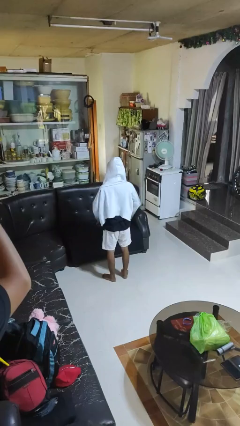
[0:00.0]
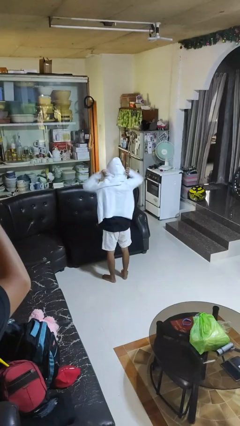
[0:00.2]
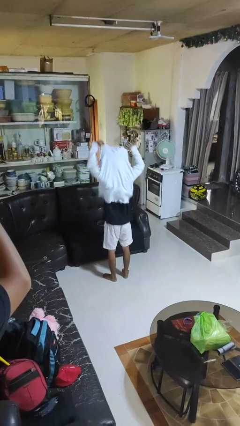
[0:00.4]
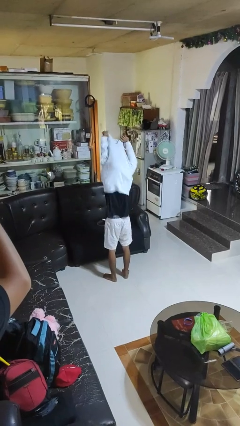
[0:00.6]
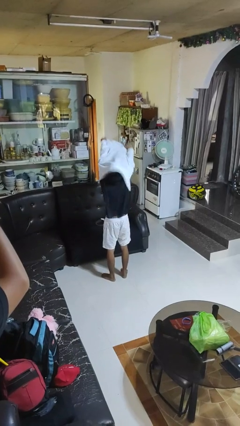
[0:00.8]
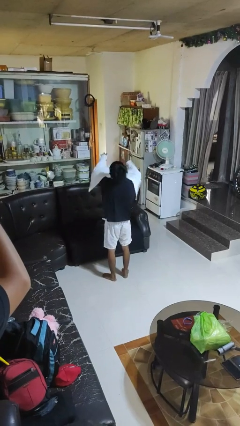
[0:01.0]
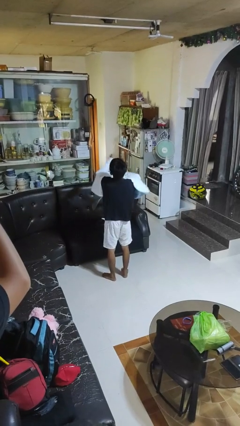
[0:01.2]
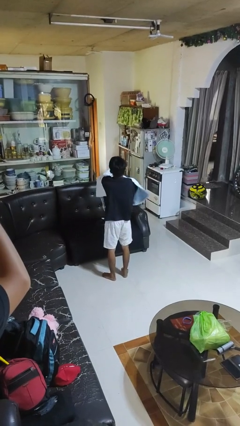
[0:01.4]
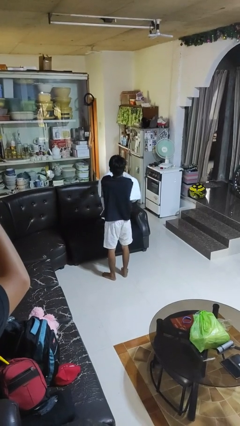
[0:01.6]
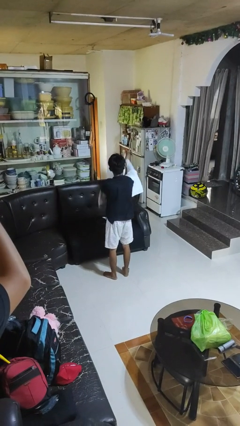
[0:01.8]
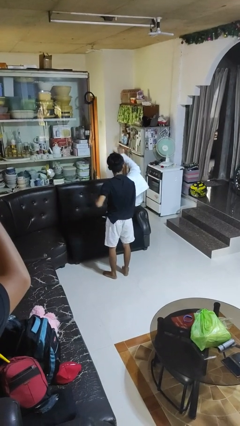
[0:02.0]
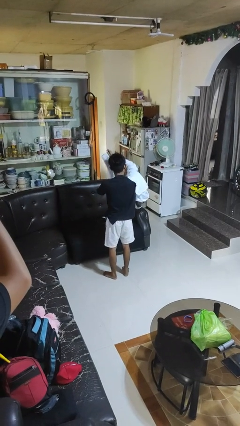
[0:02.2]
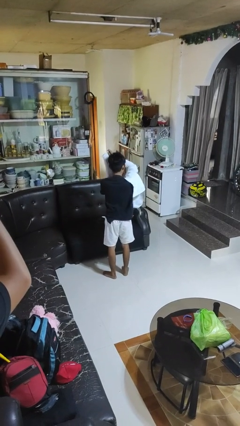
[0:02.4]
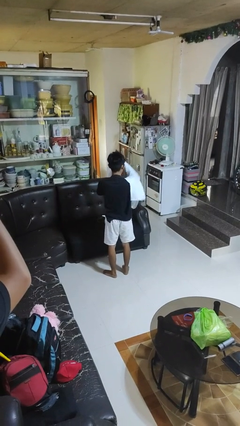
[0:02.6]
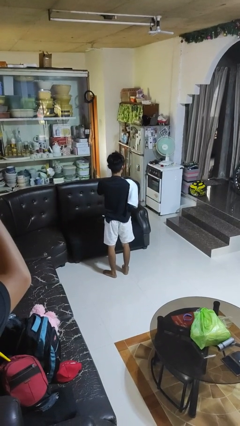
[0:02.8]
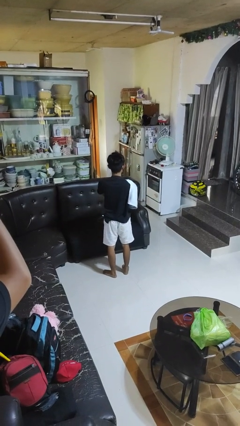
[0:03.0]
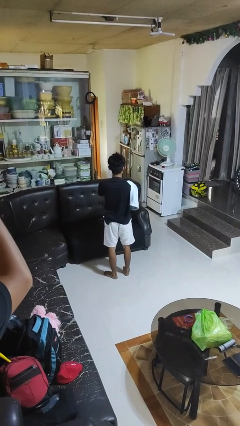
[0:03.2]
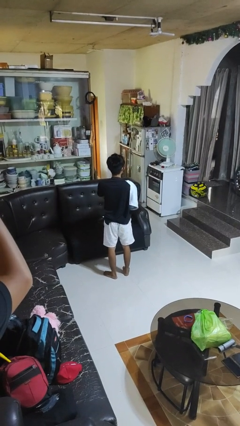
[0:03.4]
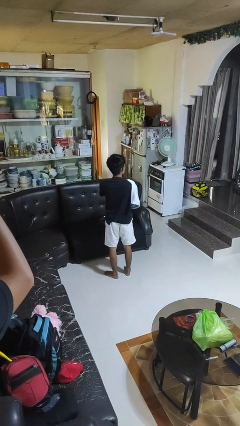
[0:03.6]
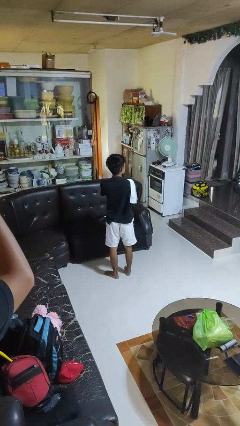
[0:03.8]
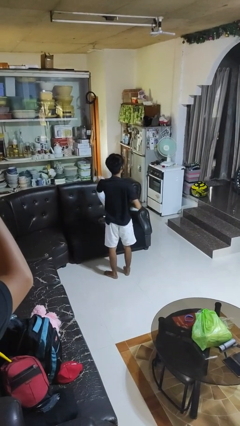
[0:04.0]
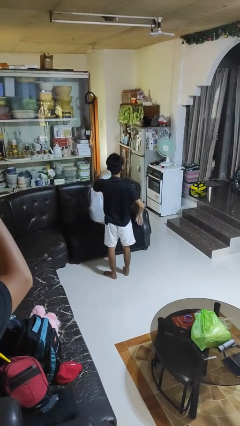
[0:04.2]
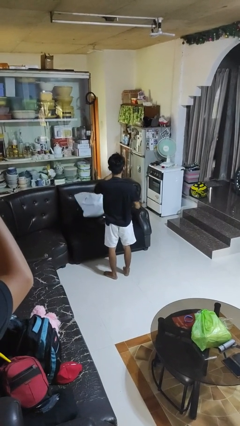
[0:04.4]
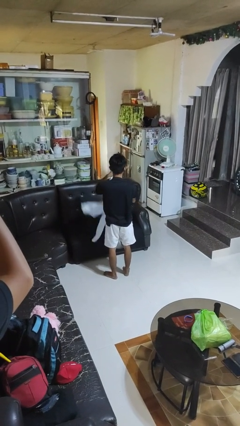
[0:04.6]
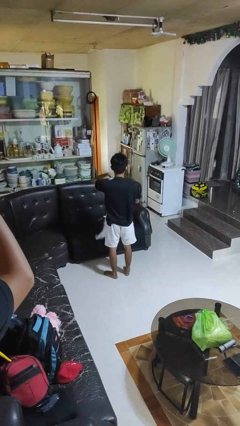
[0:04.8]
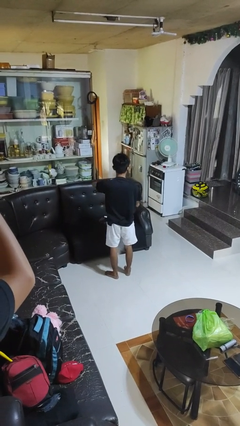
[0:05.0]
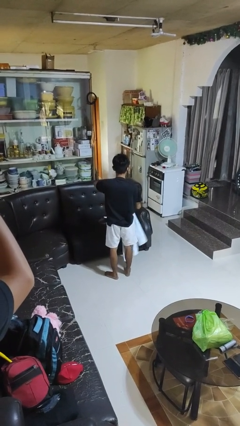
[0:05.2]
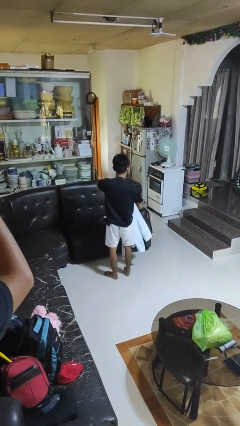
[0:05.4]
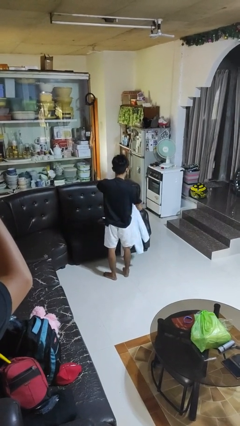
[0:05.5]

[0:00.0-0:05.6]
person takes off hoodie

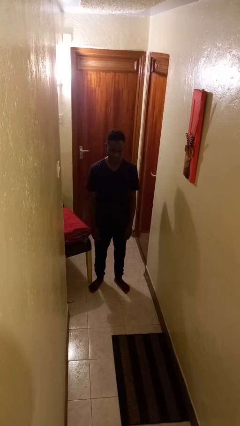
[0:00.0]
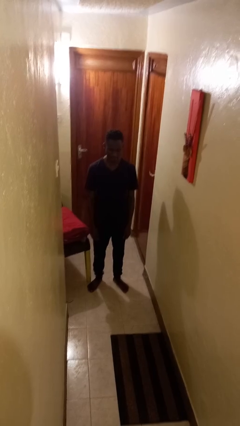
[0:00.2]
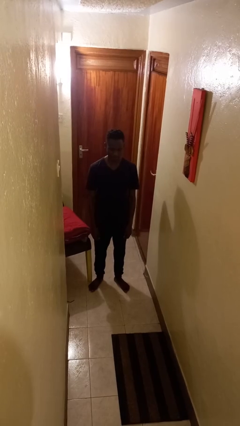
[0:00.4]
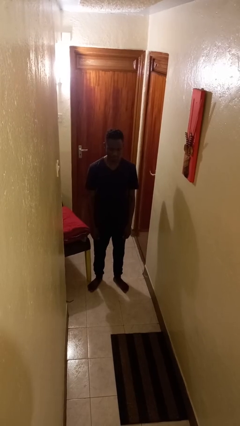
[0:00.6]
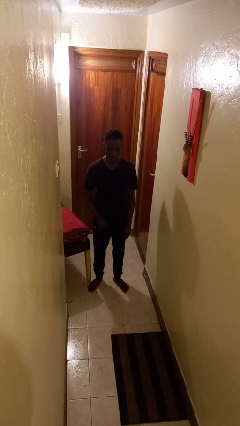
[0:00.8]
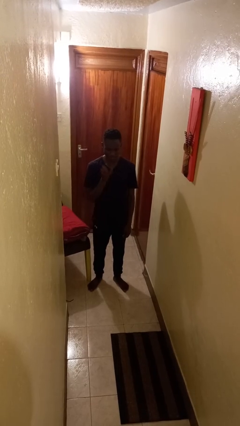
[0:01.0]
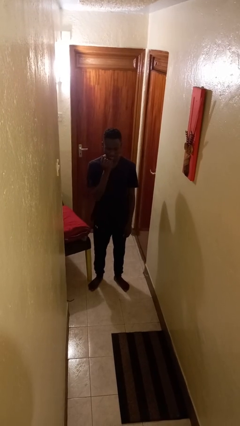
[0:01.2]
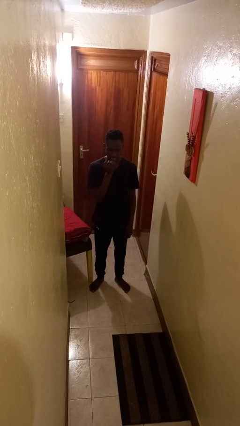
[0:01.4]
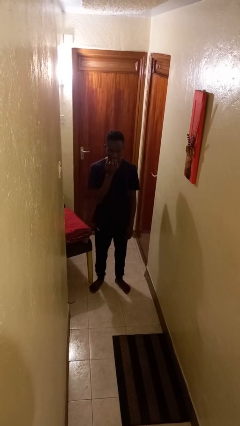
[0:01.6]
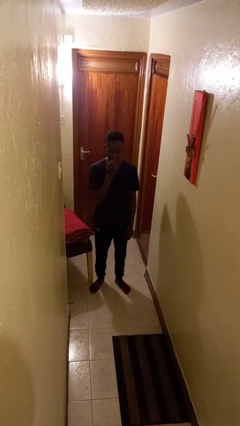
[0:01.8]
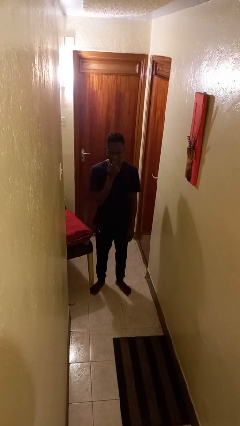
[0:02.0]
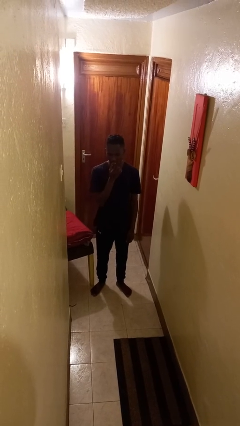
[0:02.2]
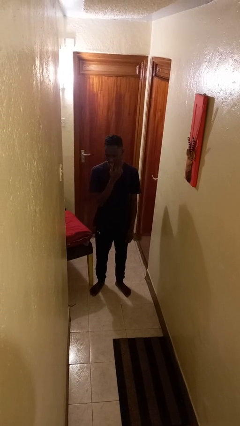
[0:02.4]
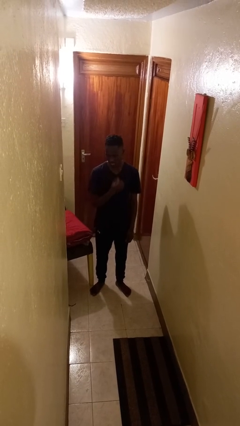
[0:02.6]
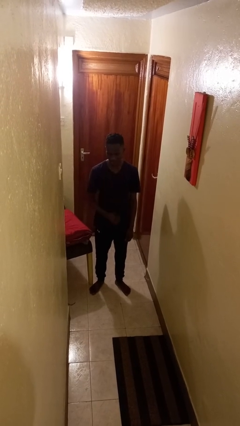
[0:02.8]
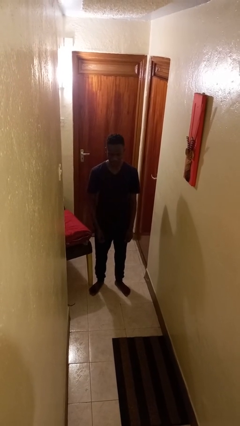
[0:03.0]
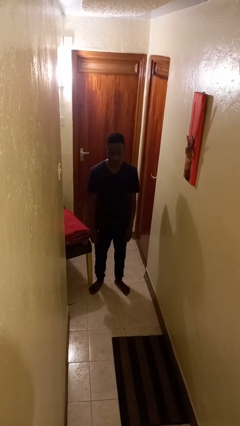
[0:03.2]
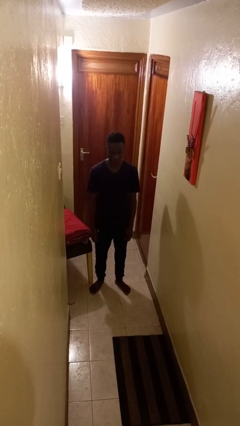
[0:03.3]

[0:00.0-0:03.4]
person licks fingers

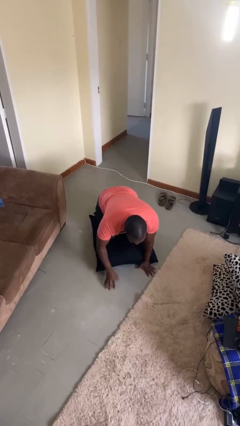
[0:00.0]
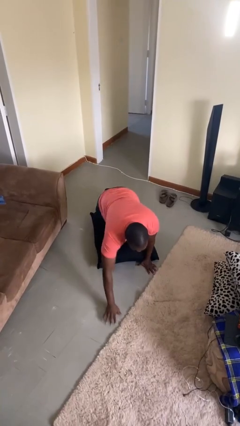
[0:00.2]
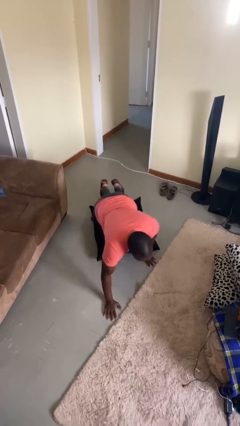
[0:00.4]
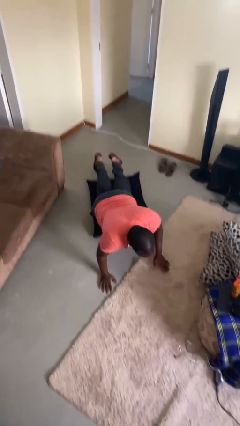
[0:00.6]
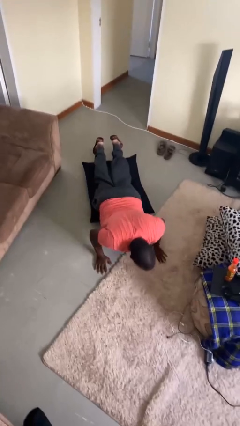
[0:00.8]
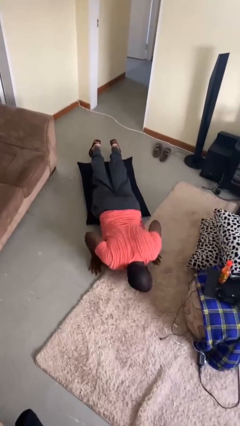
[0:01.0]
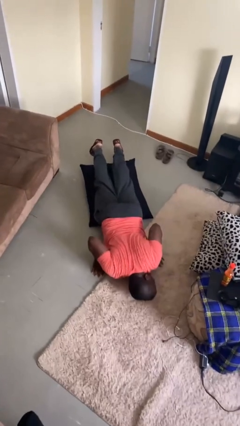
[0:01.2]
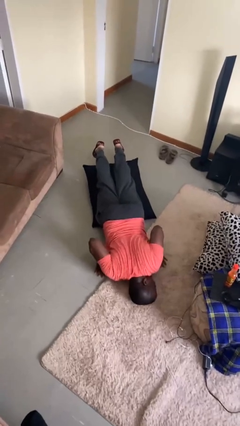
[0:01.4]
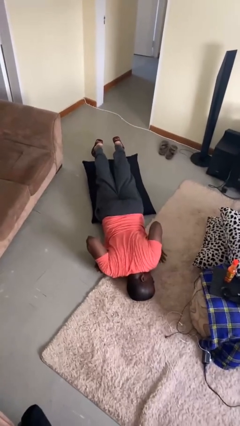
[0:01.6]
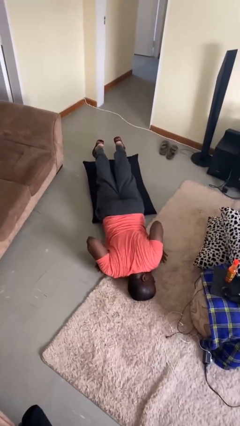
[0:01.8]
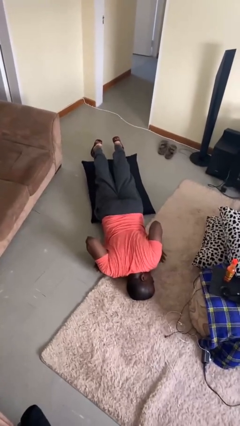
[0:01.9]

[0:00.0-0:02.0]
person lies down on floor

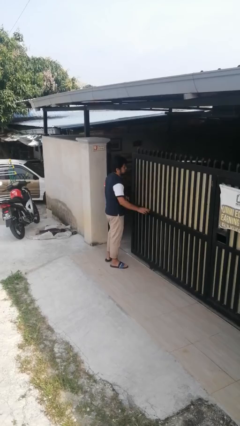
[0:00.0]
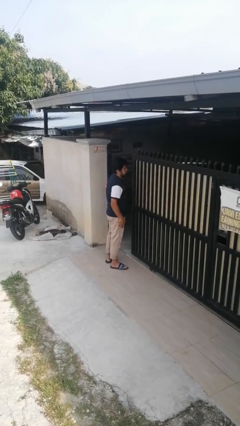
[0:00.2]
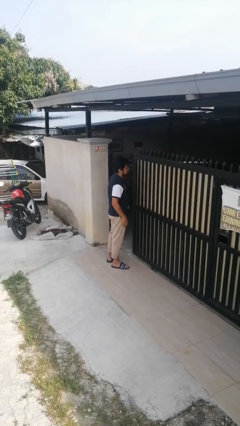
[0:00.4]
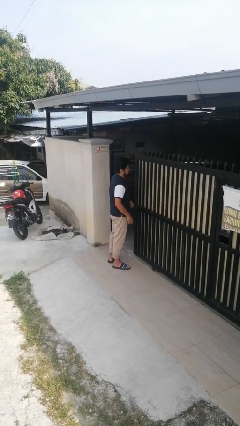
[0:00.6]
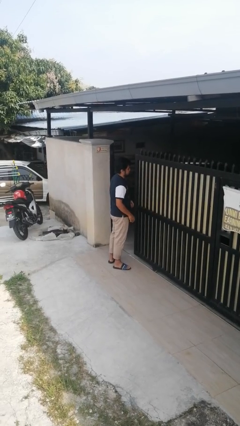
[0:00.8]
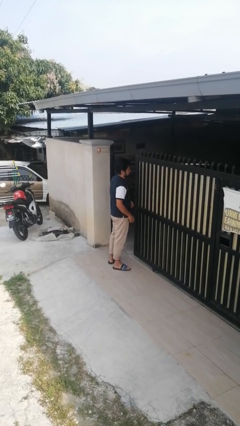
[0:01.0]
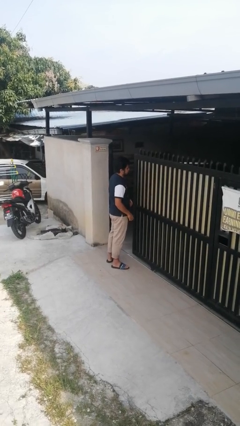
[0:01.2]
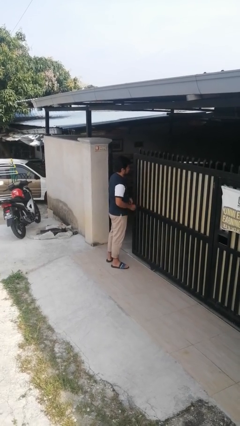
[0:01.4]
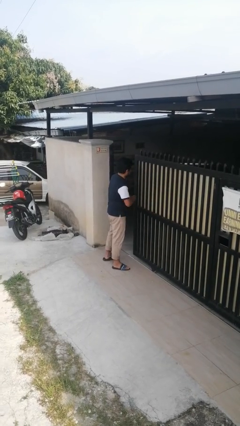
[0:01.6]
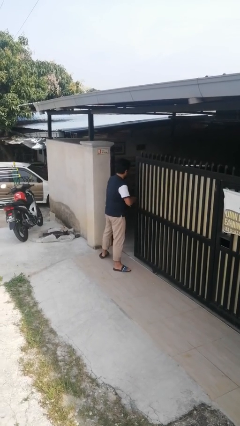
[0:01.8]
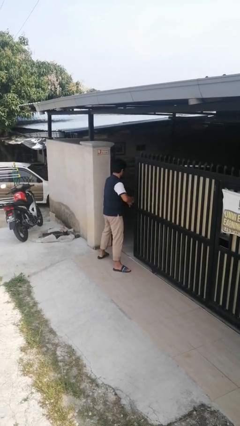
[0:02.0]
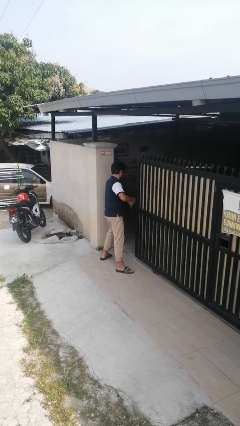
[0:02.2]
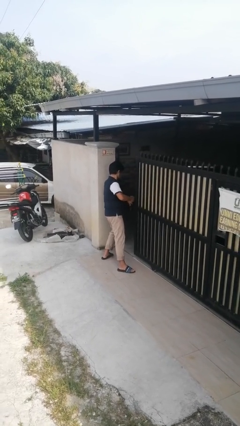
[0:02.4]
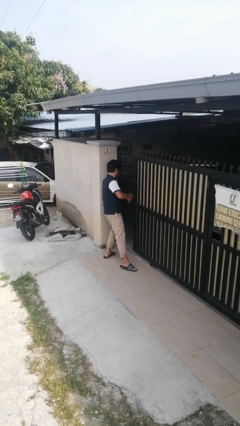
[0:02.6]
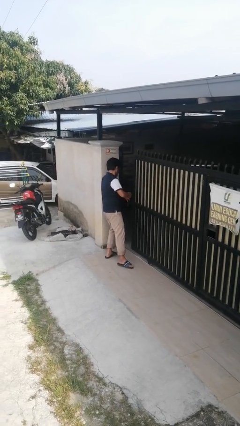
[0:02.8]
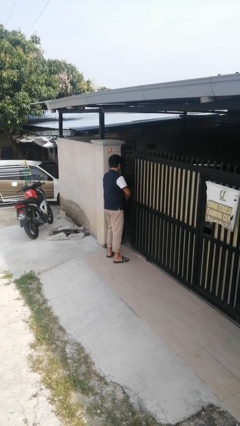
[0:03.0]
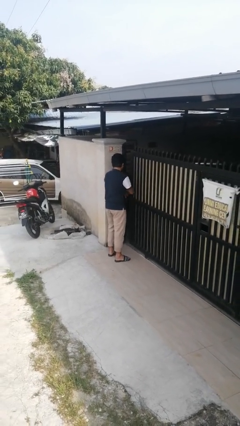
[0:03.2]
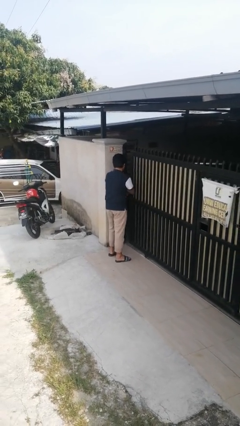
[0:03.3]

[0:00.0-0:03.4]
person closes sliding door

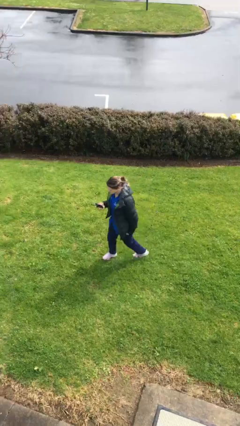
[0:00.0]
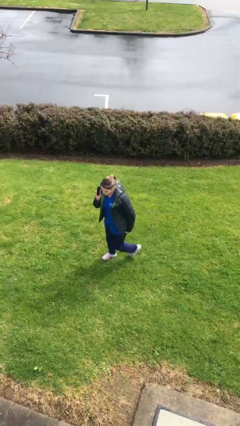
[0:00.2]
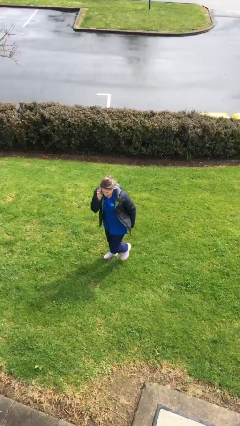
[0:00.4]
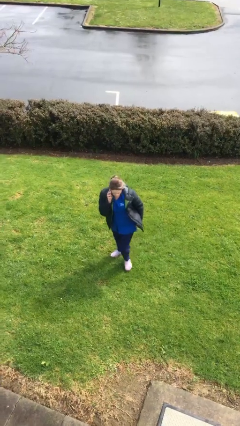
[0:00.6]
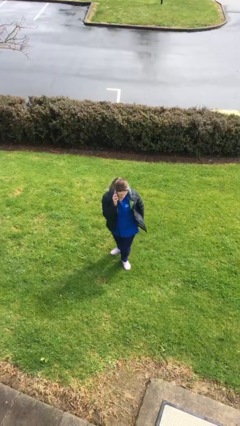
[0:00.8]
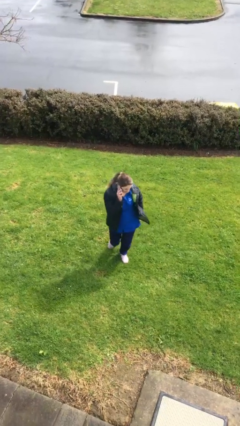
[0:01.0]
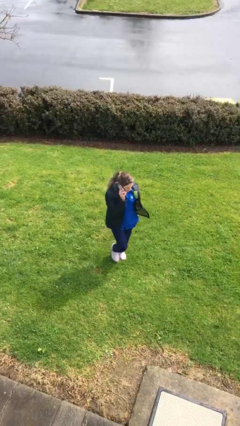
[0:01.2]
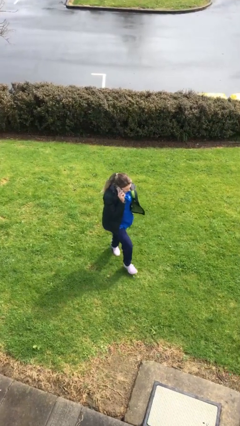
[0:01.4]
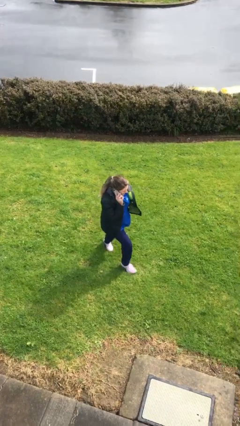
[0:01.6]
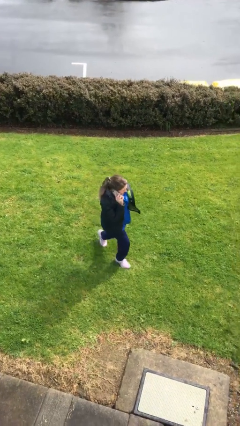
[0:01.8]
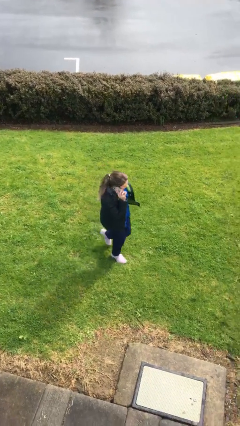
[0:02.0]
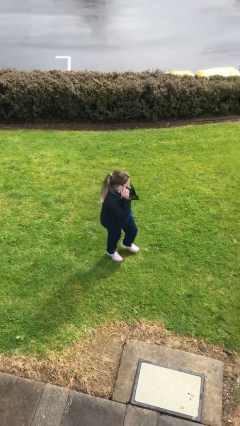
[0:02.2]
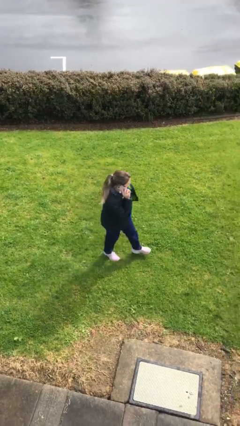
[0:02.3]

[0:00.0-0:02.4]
person talks on phone

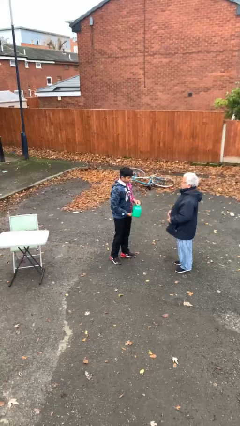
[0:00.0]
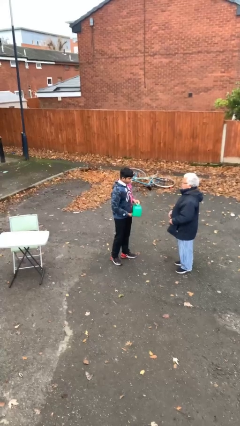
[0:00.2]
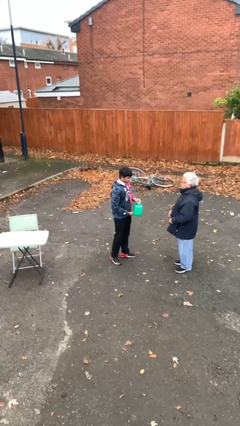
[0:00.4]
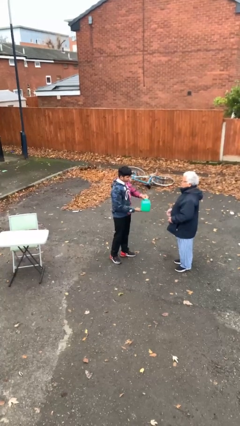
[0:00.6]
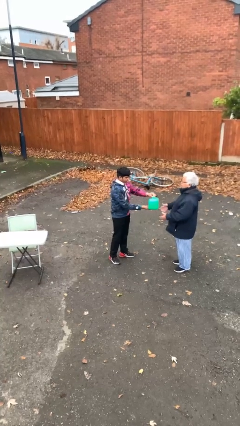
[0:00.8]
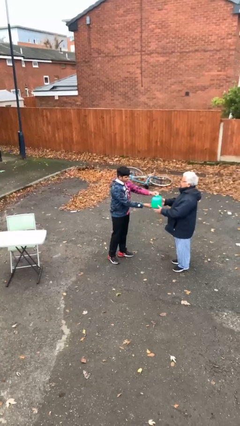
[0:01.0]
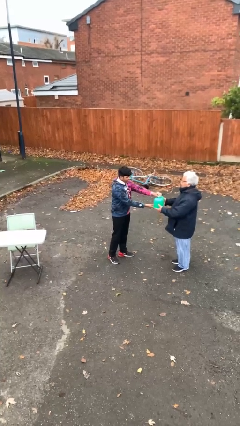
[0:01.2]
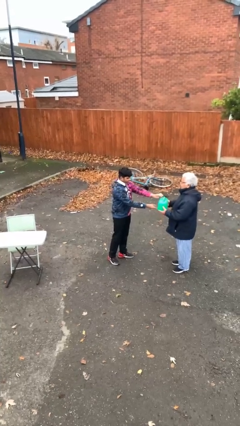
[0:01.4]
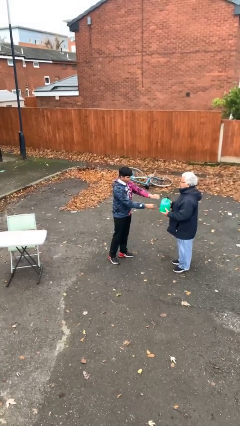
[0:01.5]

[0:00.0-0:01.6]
person transfers object to person
